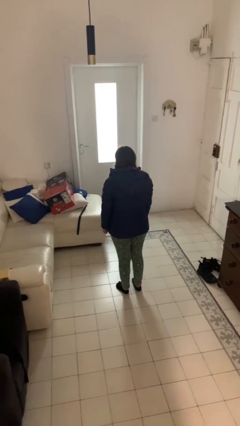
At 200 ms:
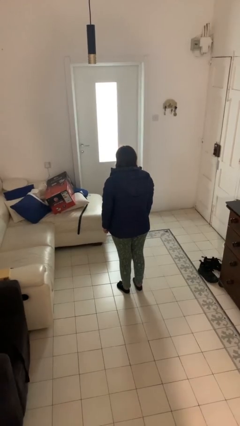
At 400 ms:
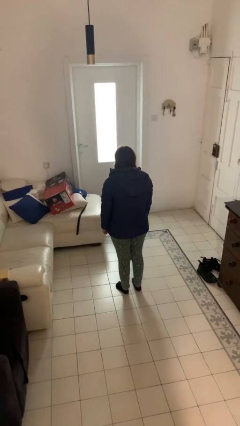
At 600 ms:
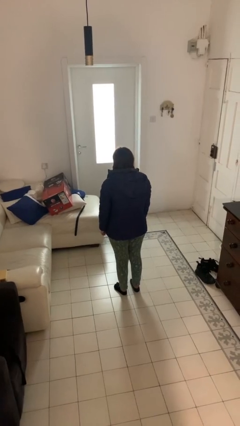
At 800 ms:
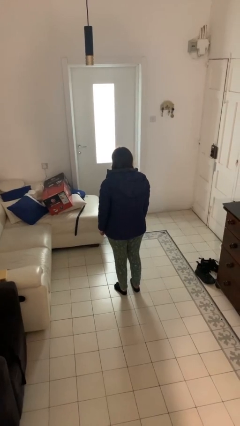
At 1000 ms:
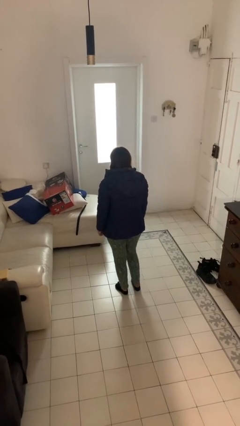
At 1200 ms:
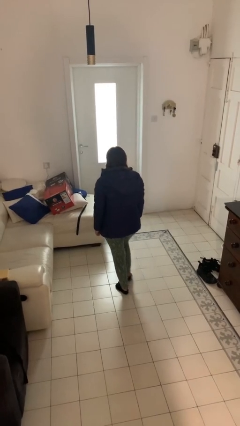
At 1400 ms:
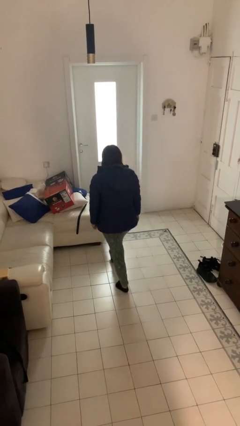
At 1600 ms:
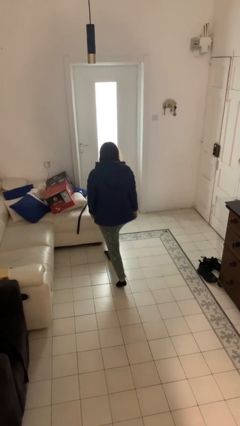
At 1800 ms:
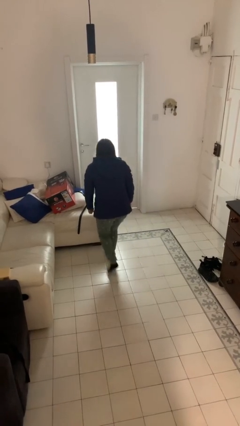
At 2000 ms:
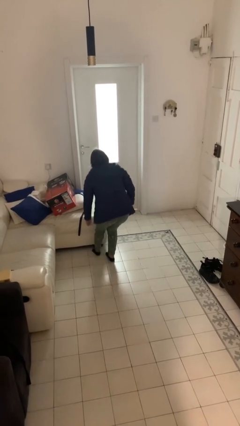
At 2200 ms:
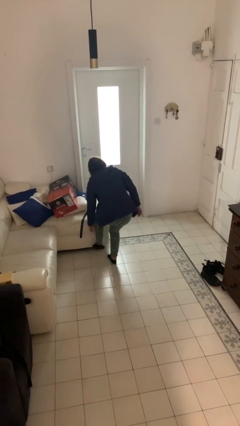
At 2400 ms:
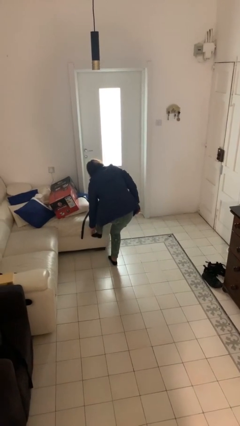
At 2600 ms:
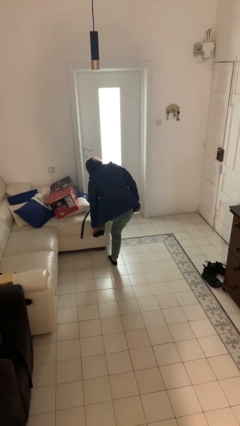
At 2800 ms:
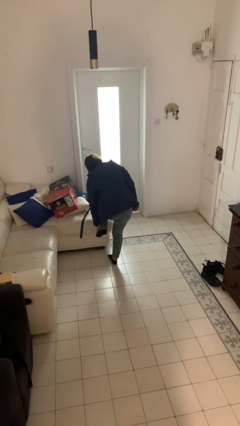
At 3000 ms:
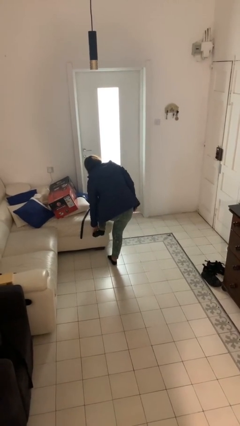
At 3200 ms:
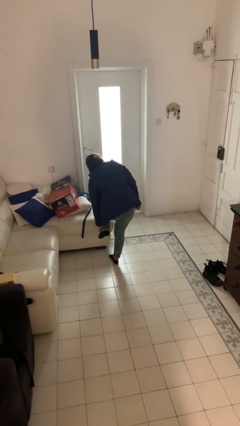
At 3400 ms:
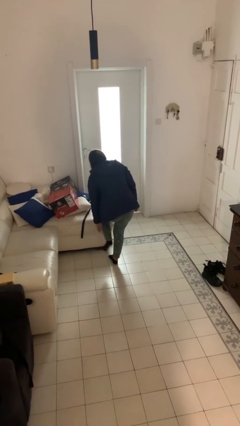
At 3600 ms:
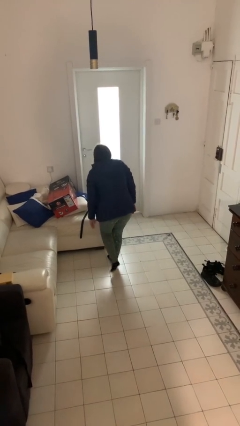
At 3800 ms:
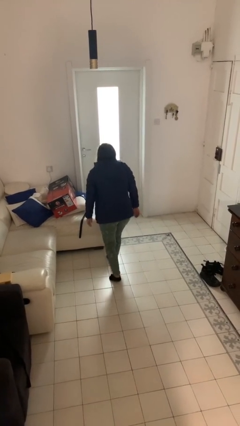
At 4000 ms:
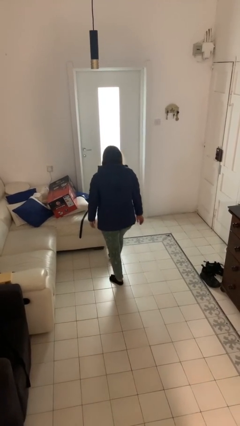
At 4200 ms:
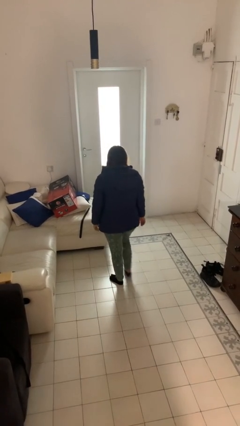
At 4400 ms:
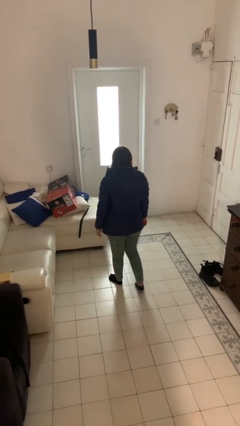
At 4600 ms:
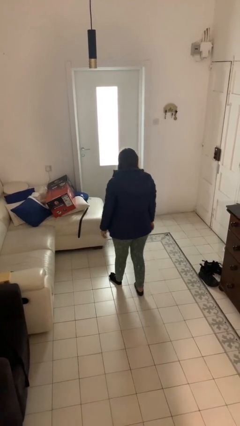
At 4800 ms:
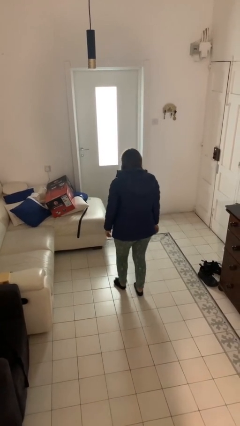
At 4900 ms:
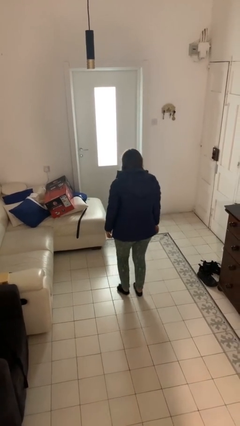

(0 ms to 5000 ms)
person stubs toe

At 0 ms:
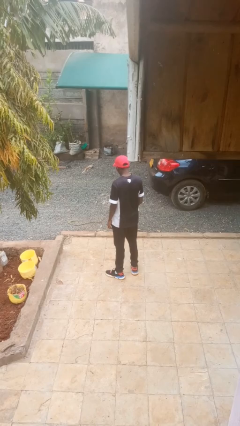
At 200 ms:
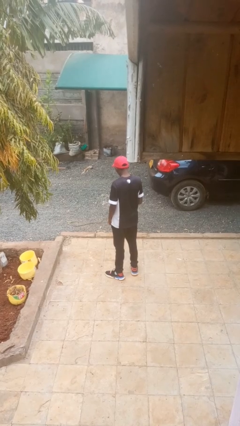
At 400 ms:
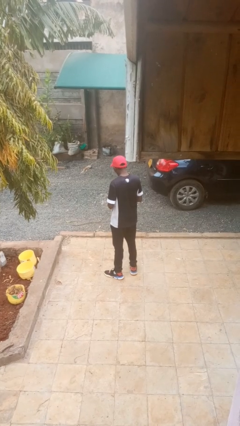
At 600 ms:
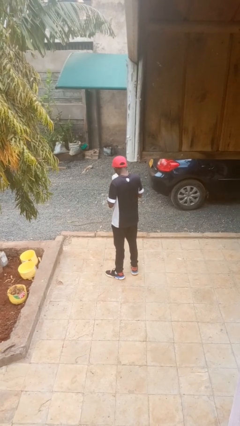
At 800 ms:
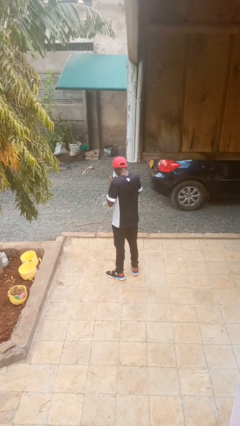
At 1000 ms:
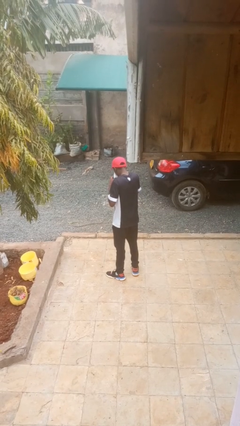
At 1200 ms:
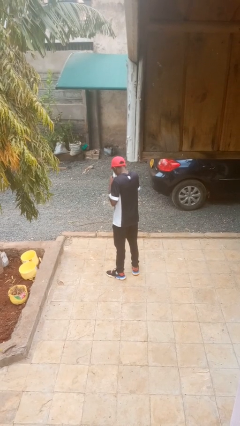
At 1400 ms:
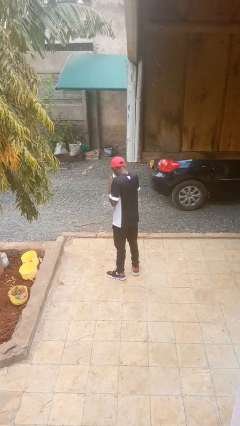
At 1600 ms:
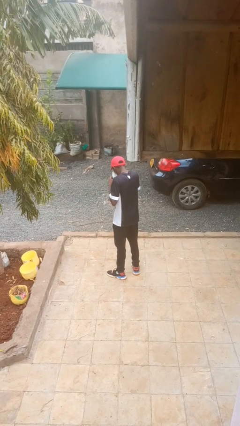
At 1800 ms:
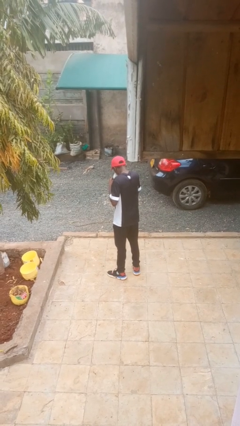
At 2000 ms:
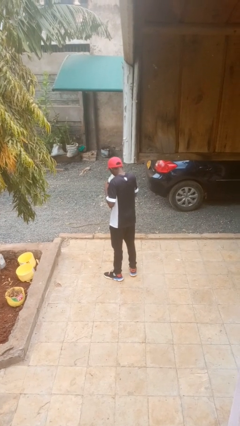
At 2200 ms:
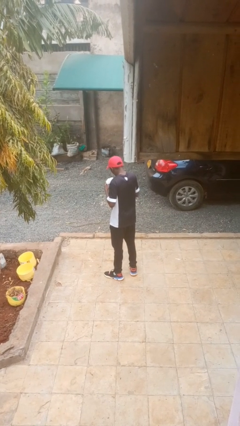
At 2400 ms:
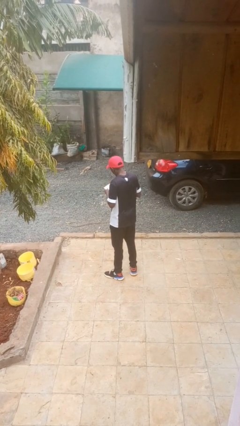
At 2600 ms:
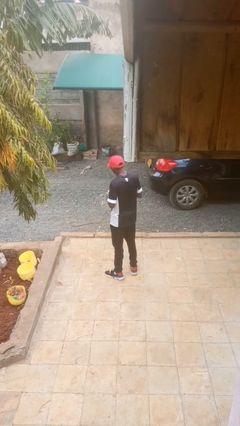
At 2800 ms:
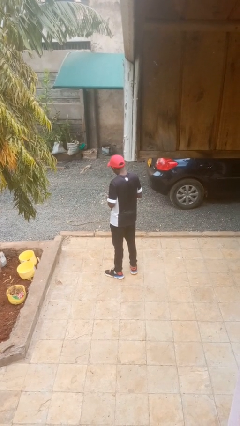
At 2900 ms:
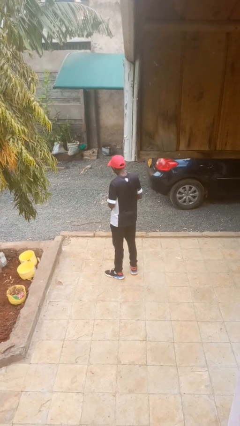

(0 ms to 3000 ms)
person blows nose

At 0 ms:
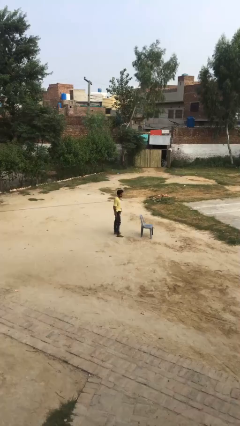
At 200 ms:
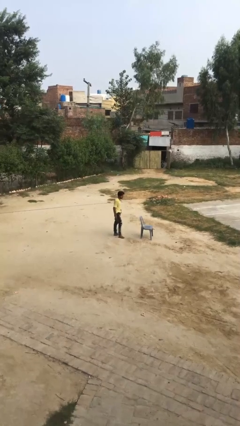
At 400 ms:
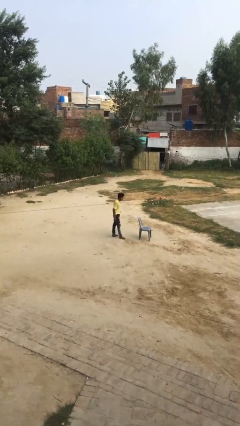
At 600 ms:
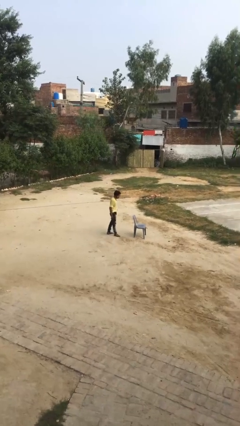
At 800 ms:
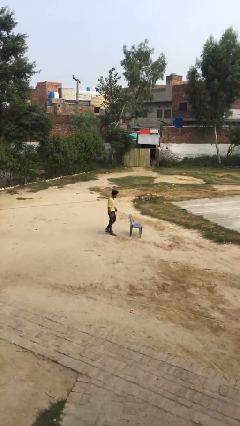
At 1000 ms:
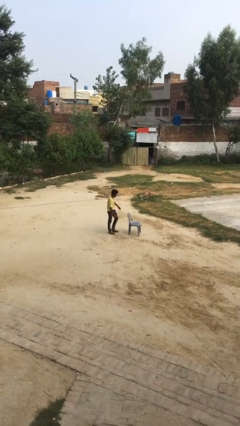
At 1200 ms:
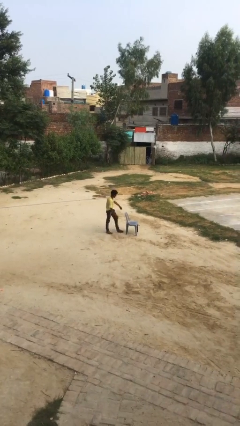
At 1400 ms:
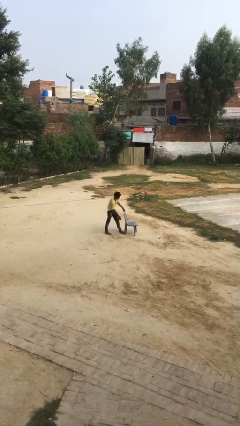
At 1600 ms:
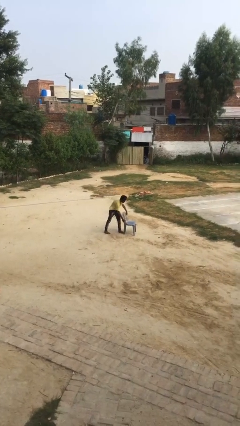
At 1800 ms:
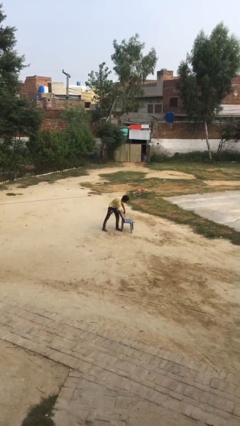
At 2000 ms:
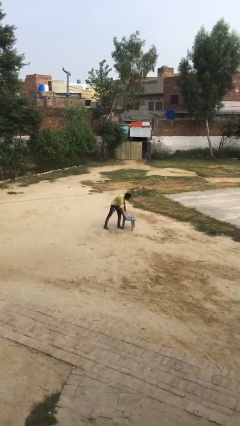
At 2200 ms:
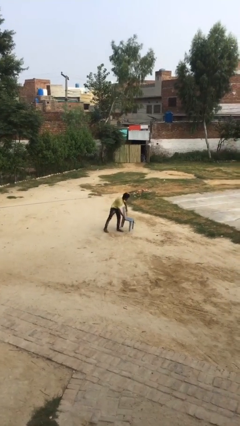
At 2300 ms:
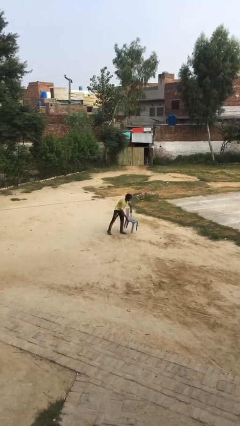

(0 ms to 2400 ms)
person picks up object from floor

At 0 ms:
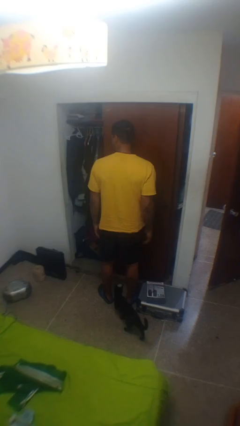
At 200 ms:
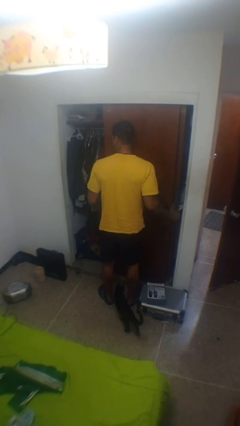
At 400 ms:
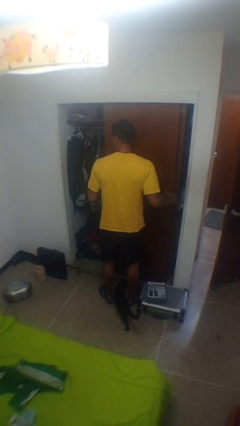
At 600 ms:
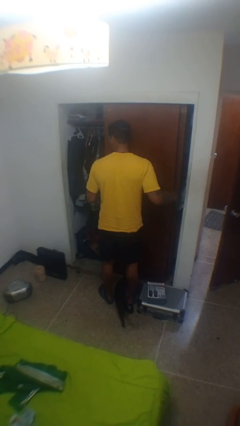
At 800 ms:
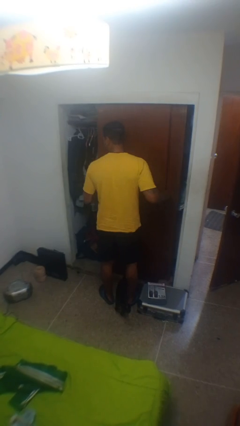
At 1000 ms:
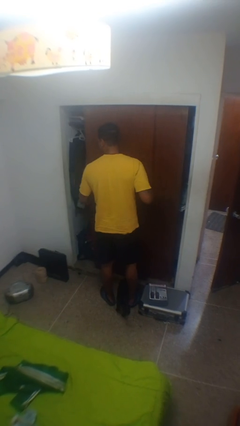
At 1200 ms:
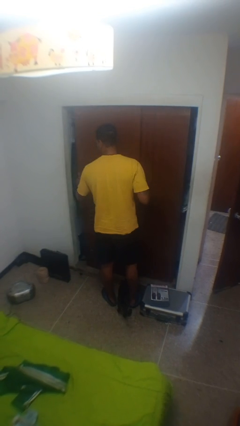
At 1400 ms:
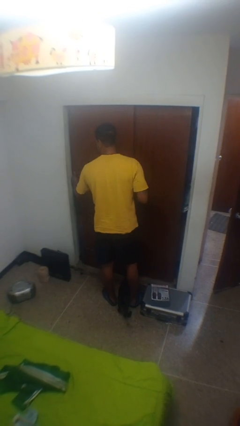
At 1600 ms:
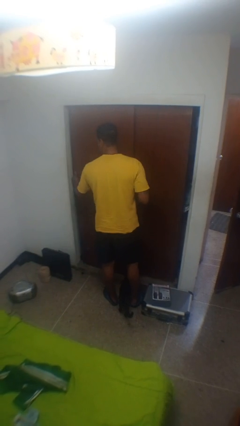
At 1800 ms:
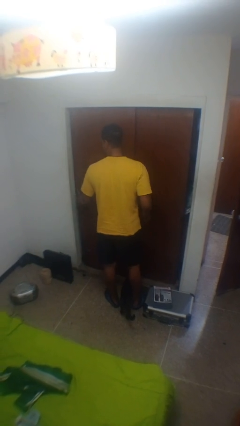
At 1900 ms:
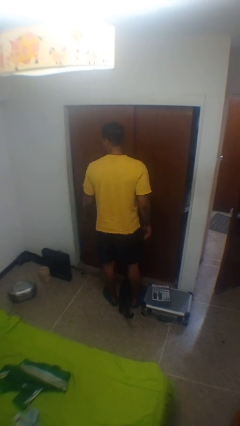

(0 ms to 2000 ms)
person closes closet door

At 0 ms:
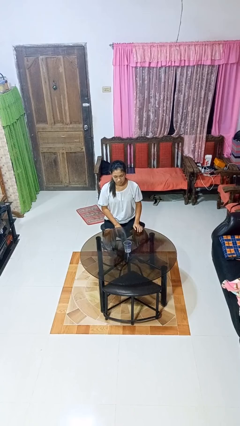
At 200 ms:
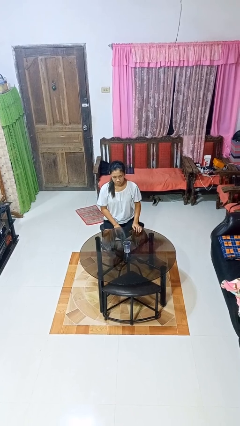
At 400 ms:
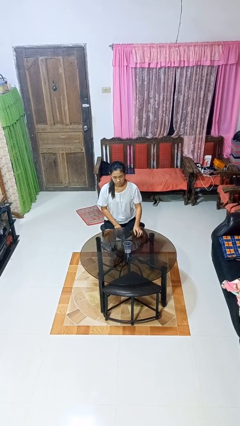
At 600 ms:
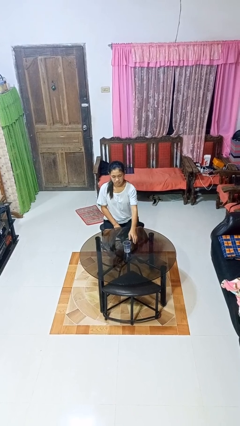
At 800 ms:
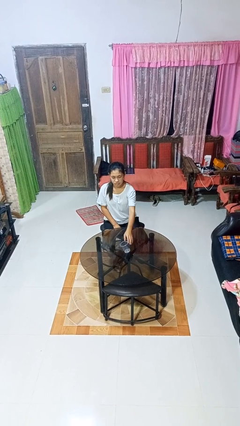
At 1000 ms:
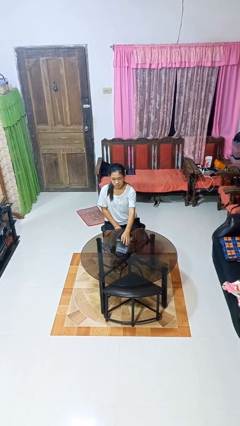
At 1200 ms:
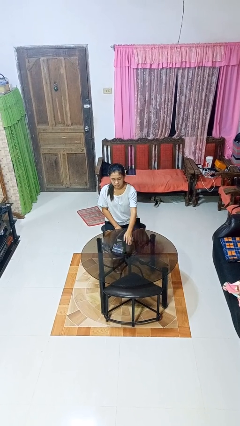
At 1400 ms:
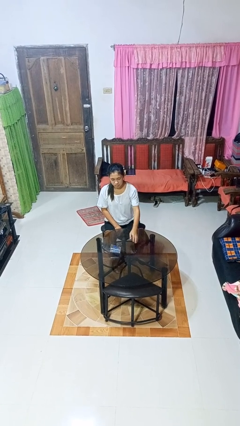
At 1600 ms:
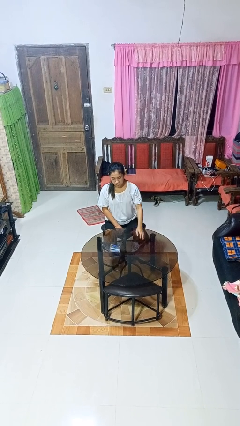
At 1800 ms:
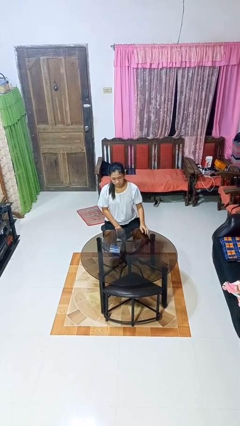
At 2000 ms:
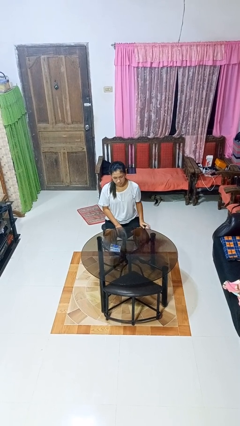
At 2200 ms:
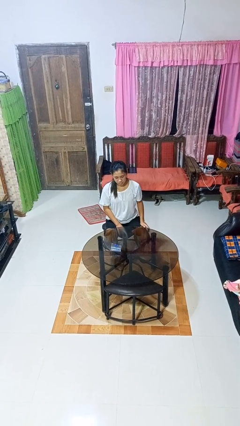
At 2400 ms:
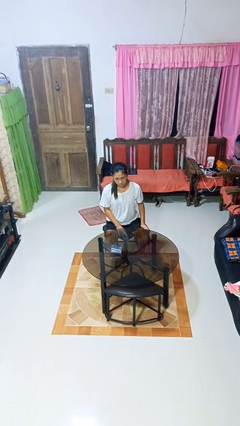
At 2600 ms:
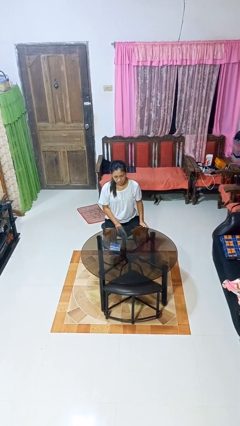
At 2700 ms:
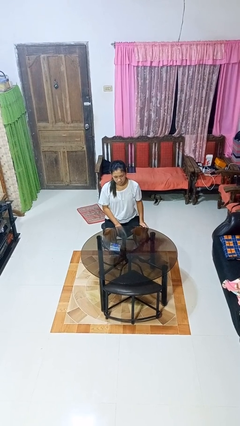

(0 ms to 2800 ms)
person knocks over glass

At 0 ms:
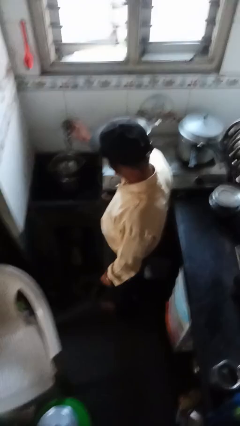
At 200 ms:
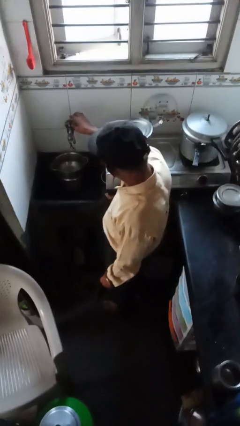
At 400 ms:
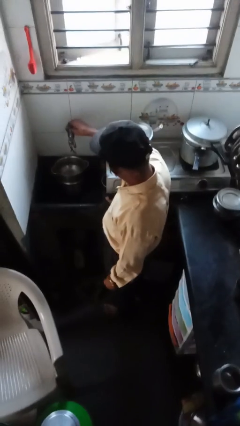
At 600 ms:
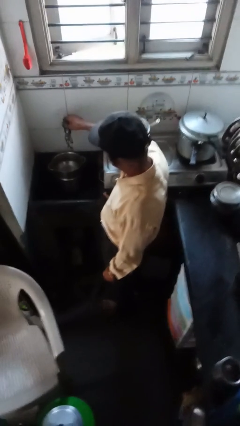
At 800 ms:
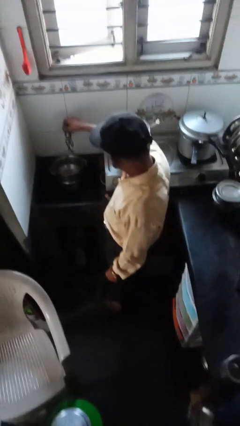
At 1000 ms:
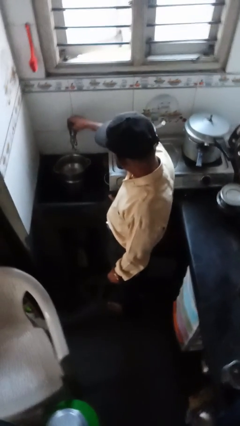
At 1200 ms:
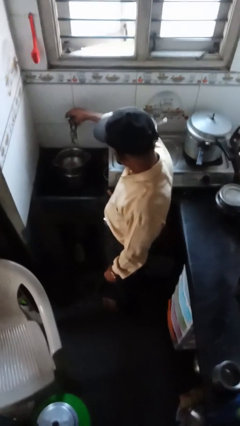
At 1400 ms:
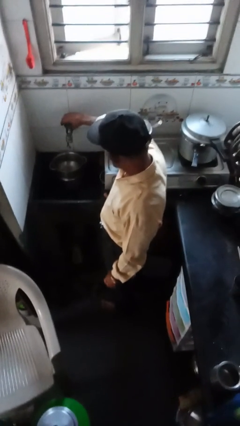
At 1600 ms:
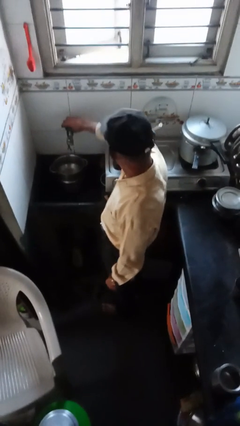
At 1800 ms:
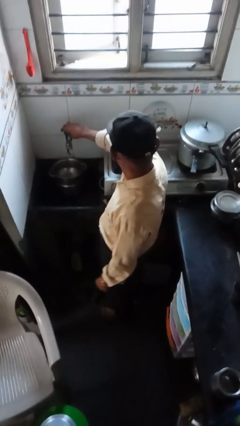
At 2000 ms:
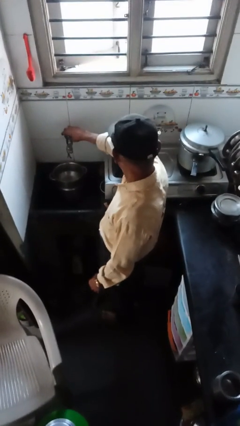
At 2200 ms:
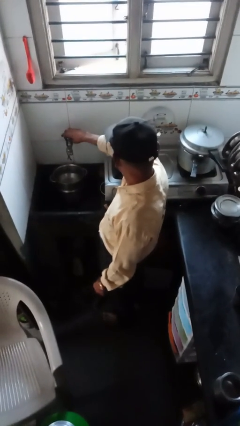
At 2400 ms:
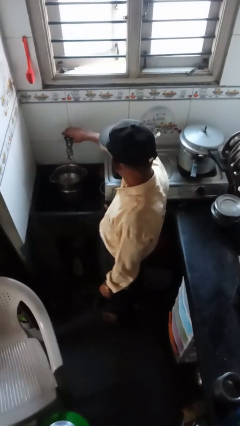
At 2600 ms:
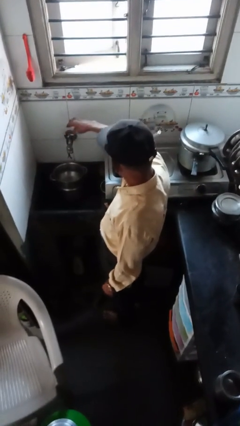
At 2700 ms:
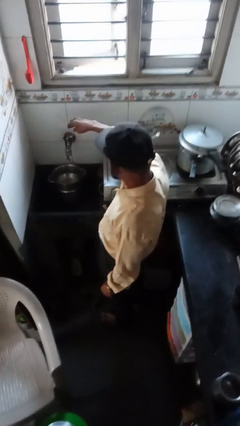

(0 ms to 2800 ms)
person turns on faucet
